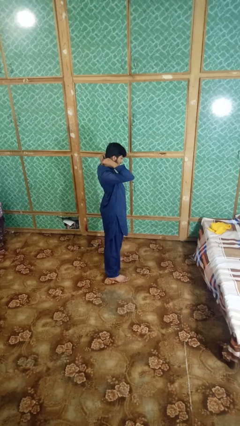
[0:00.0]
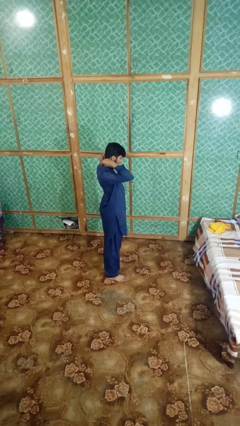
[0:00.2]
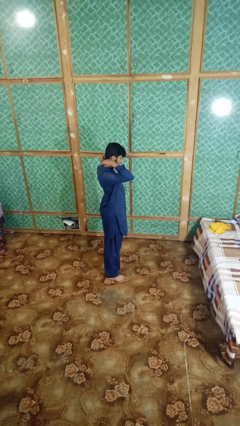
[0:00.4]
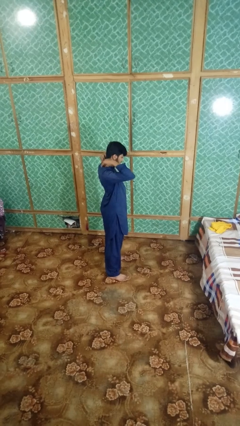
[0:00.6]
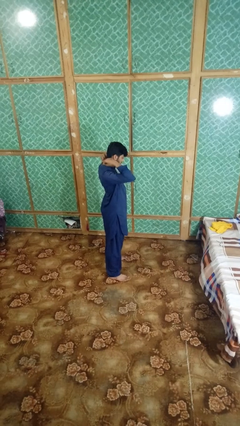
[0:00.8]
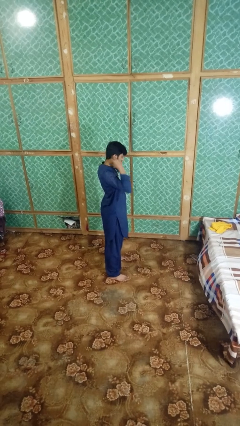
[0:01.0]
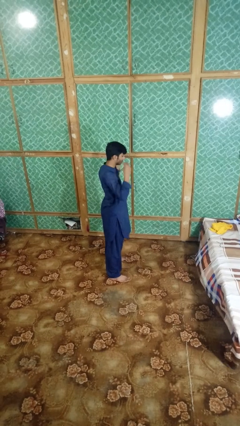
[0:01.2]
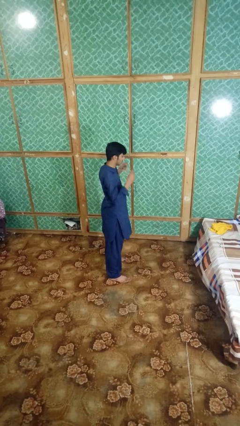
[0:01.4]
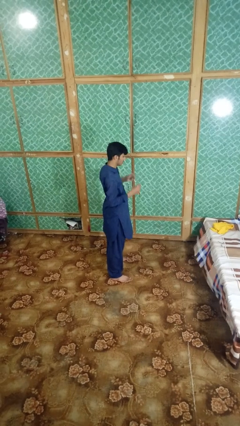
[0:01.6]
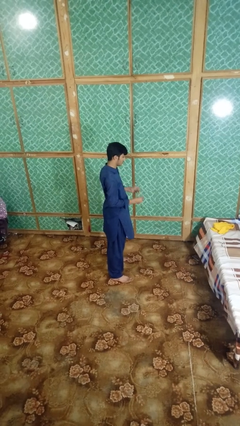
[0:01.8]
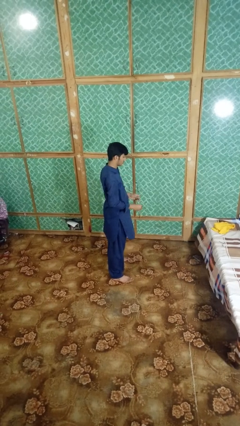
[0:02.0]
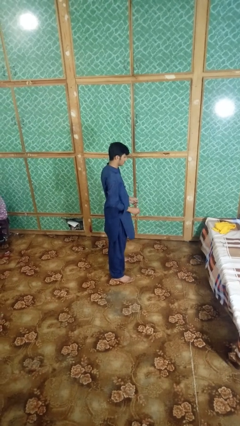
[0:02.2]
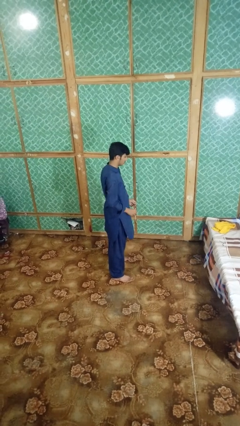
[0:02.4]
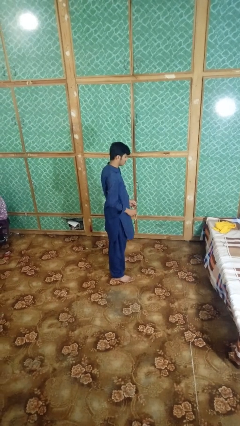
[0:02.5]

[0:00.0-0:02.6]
person takes off necklace

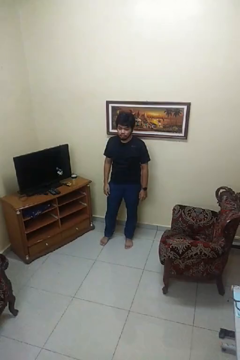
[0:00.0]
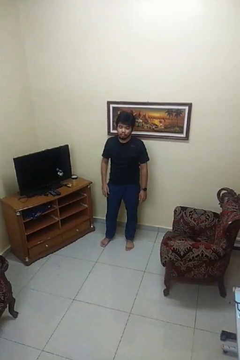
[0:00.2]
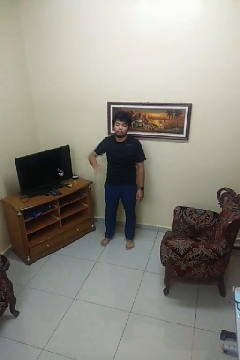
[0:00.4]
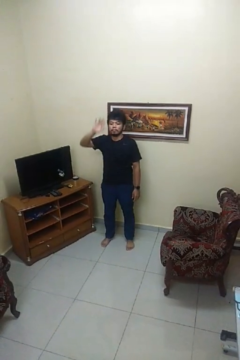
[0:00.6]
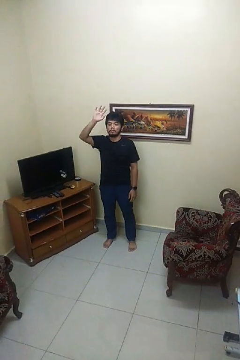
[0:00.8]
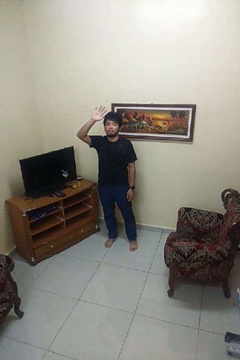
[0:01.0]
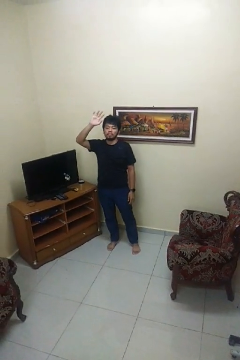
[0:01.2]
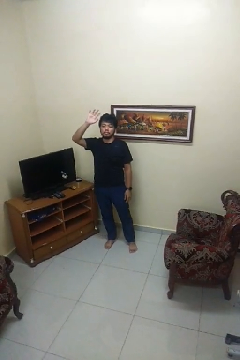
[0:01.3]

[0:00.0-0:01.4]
person gestures raise hand

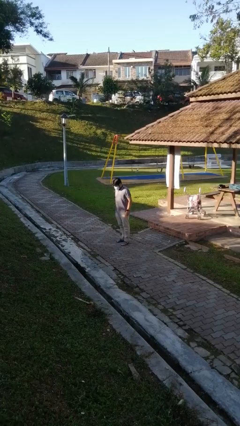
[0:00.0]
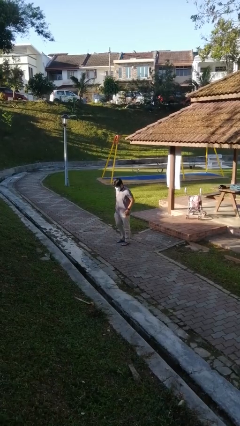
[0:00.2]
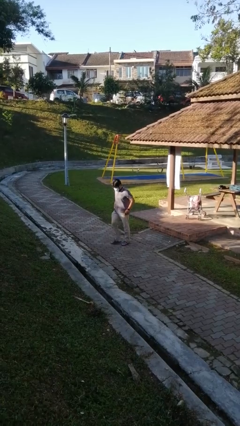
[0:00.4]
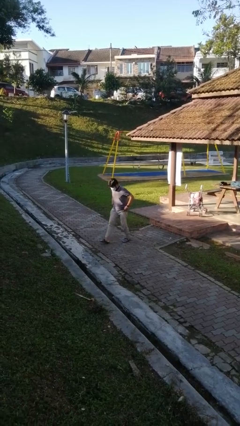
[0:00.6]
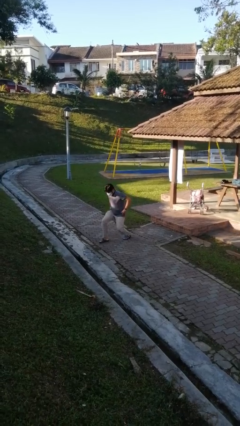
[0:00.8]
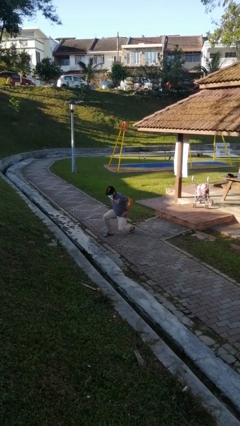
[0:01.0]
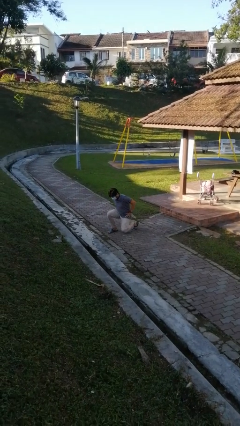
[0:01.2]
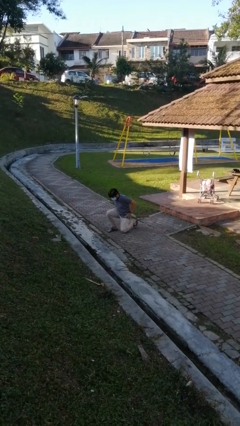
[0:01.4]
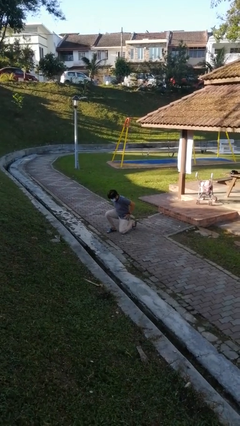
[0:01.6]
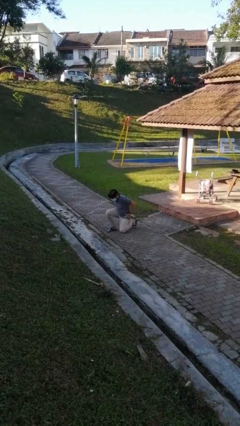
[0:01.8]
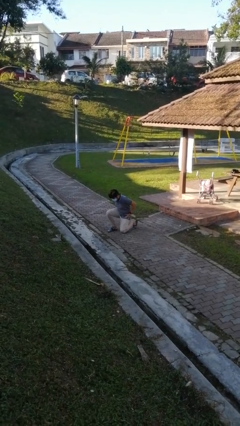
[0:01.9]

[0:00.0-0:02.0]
person kneels

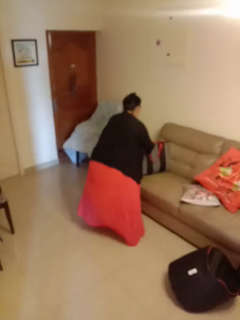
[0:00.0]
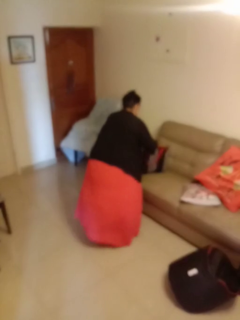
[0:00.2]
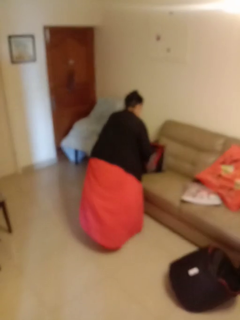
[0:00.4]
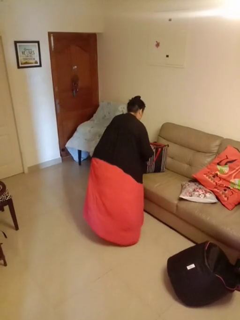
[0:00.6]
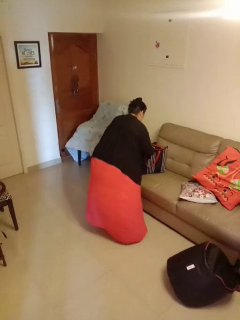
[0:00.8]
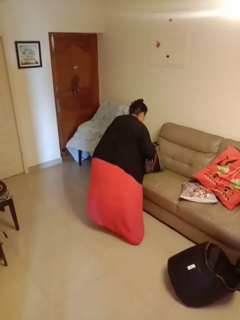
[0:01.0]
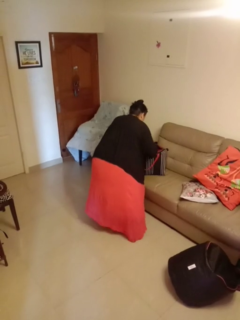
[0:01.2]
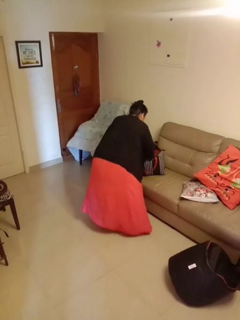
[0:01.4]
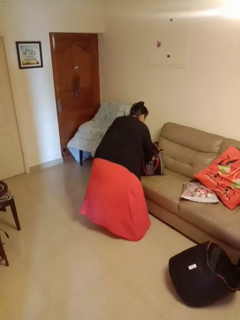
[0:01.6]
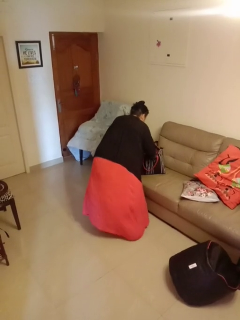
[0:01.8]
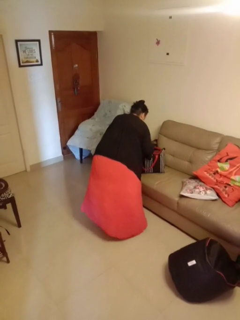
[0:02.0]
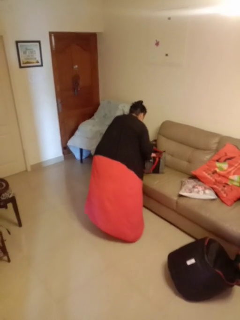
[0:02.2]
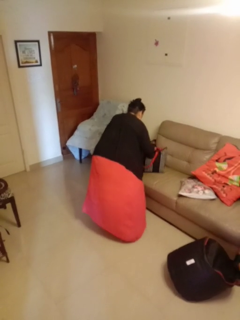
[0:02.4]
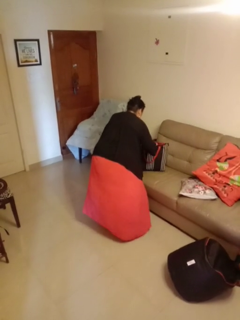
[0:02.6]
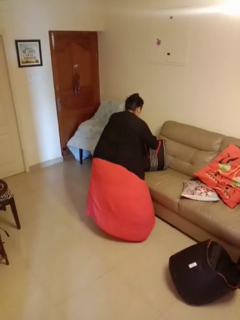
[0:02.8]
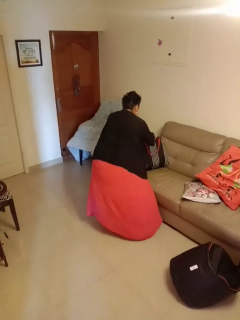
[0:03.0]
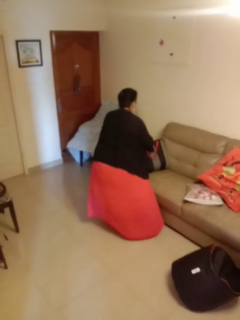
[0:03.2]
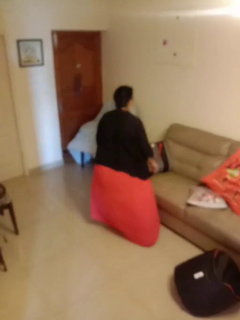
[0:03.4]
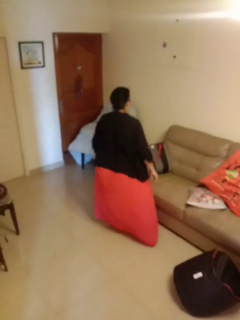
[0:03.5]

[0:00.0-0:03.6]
person searches in bag

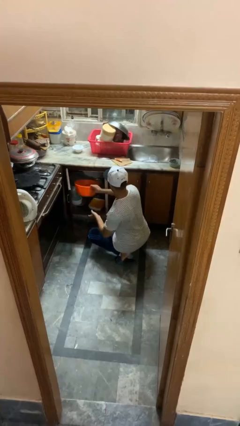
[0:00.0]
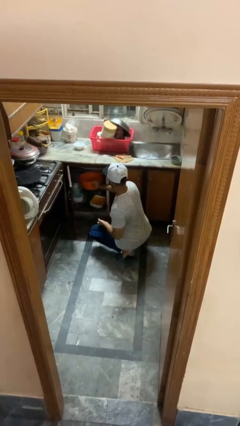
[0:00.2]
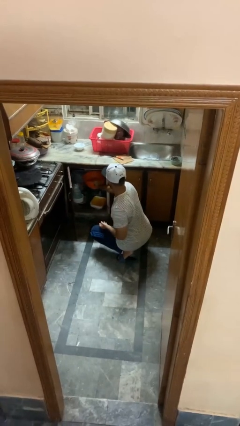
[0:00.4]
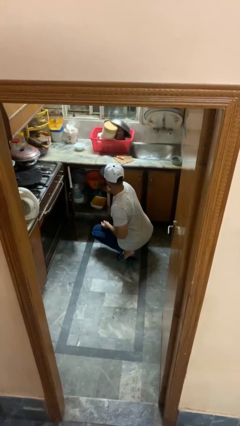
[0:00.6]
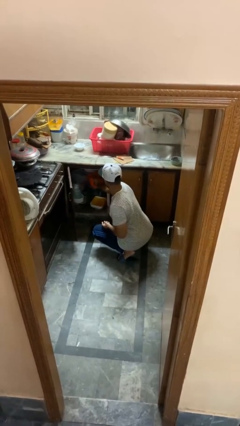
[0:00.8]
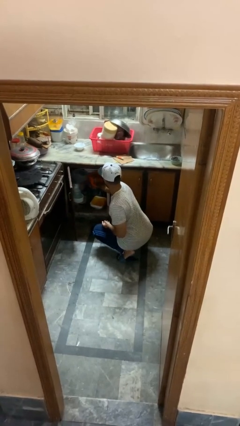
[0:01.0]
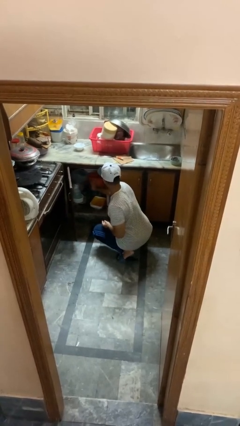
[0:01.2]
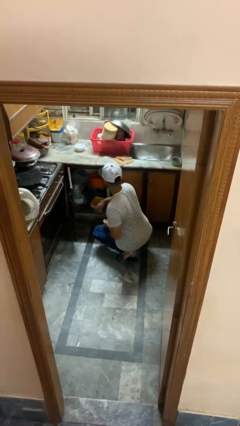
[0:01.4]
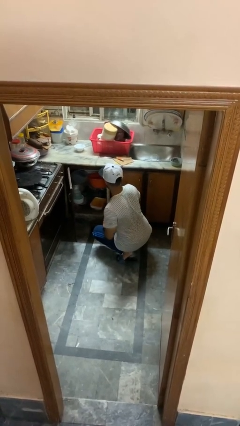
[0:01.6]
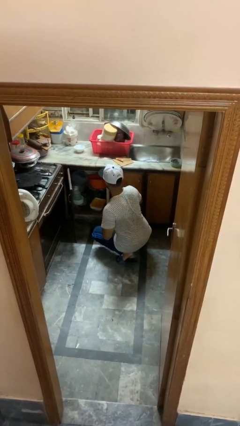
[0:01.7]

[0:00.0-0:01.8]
person puts object into kitchen drawer

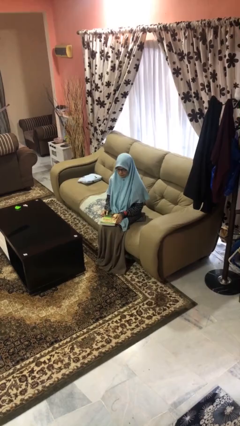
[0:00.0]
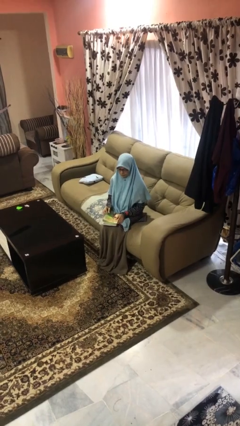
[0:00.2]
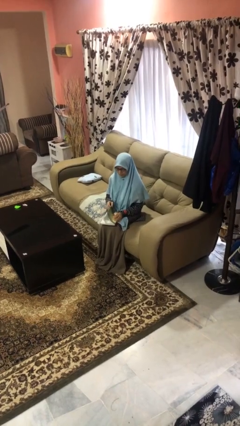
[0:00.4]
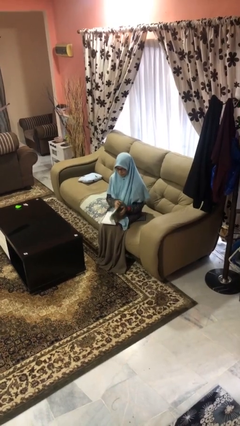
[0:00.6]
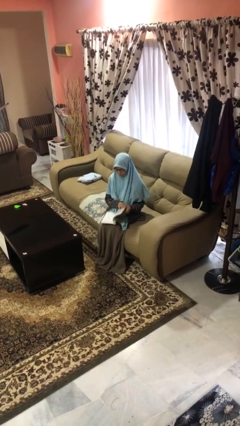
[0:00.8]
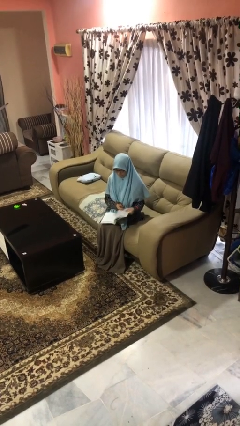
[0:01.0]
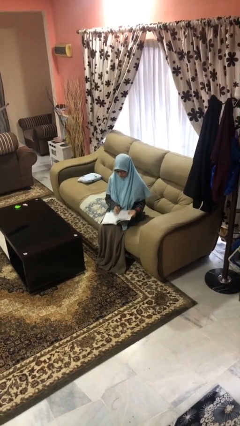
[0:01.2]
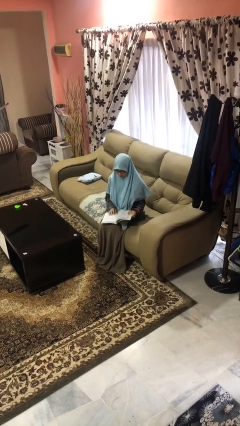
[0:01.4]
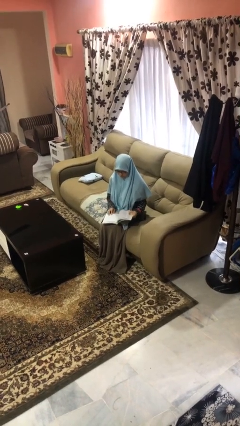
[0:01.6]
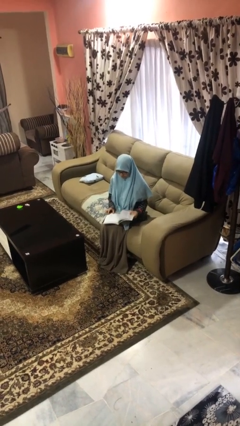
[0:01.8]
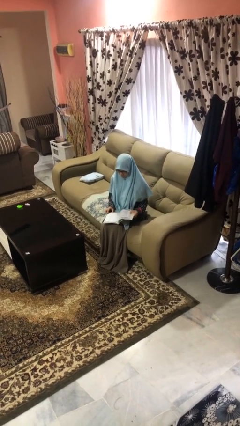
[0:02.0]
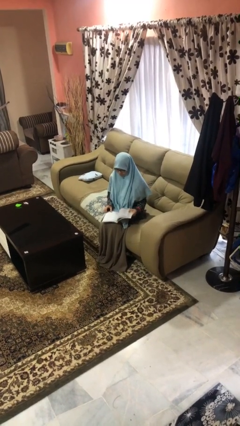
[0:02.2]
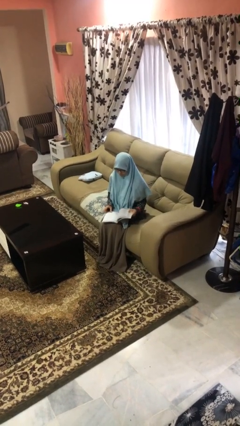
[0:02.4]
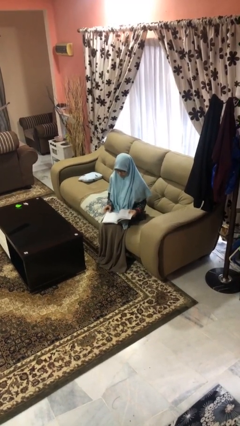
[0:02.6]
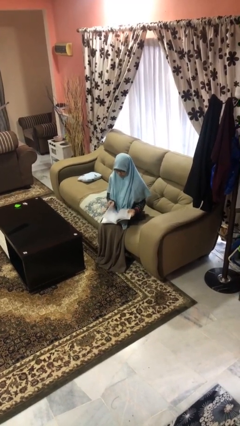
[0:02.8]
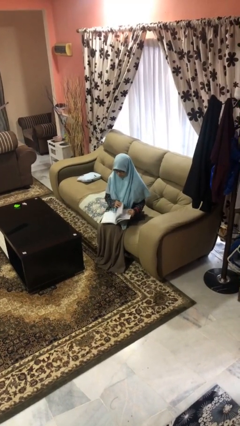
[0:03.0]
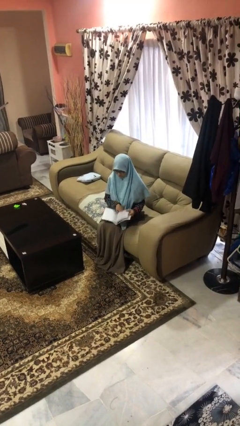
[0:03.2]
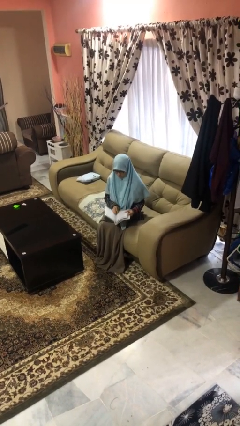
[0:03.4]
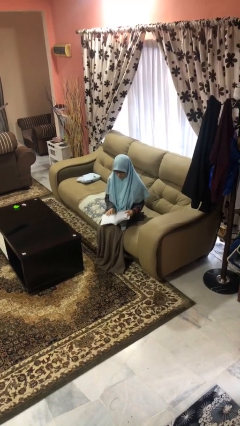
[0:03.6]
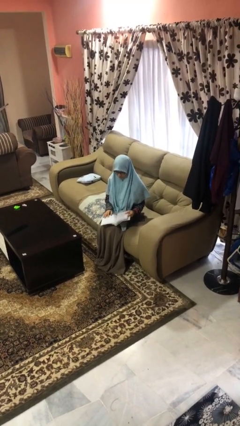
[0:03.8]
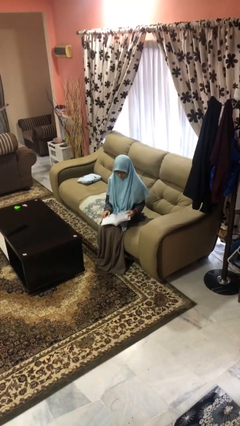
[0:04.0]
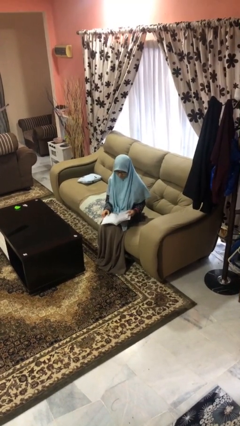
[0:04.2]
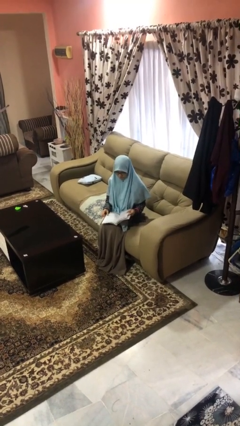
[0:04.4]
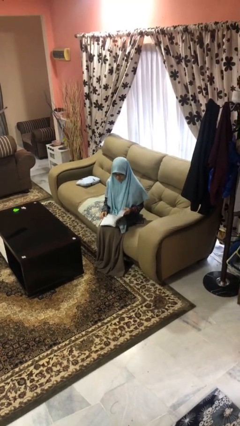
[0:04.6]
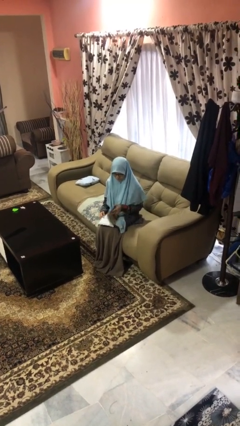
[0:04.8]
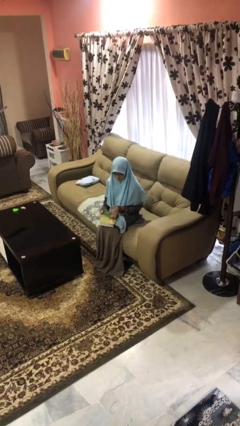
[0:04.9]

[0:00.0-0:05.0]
person reads book

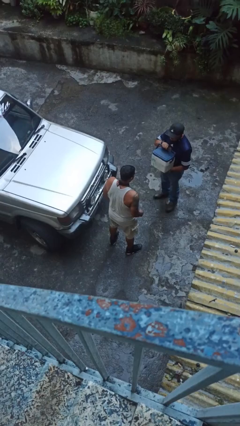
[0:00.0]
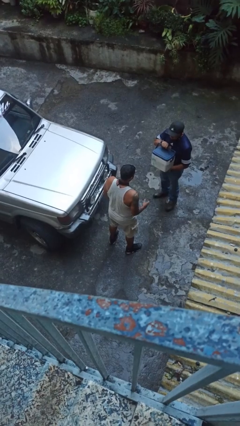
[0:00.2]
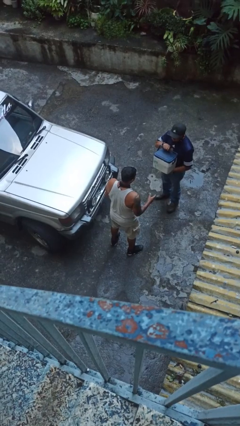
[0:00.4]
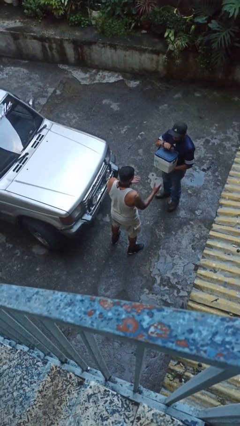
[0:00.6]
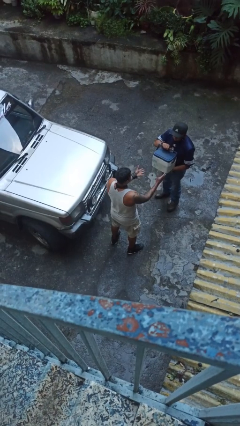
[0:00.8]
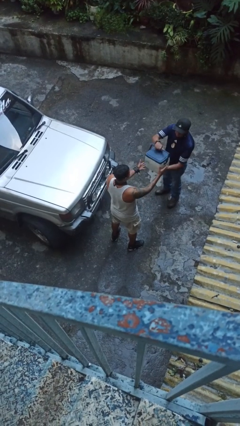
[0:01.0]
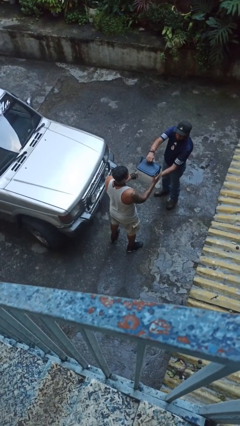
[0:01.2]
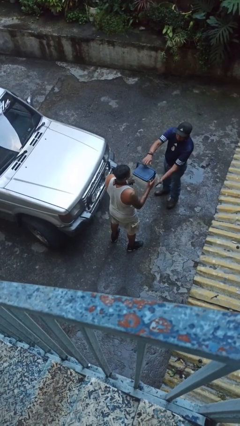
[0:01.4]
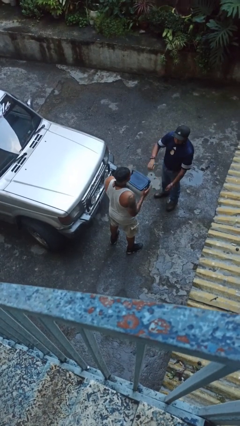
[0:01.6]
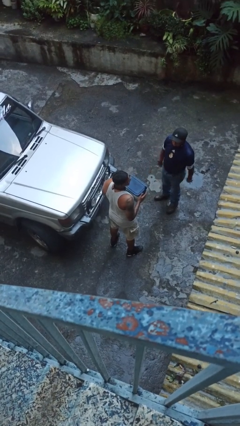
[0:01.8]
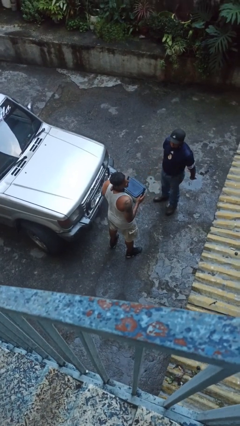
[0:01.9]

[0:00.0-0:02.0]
person transfers object to person

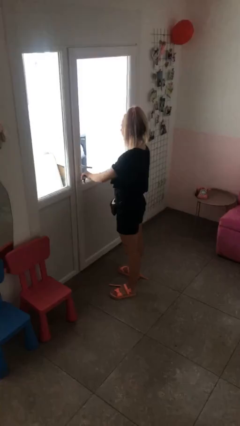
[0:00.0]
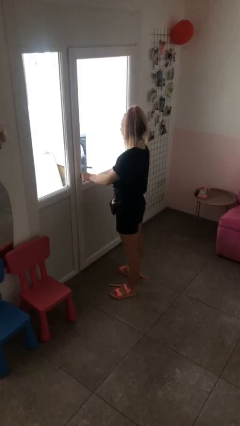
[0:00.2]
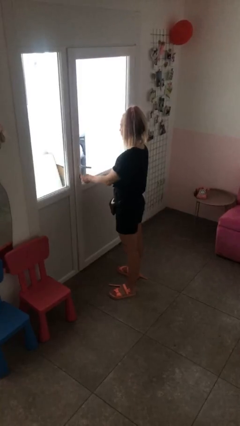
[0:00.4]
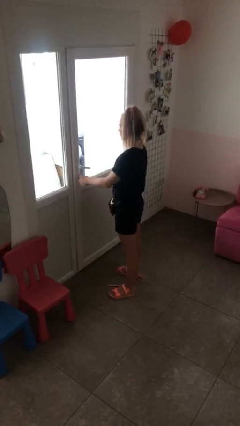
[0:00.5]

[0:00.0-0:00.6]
person locks door with keys
